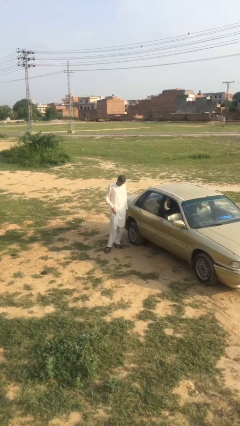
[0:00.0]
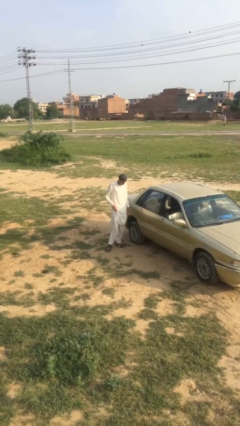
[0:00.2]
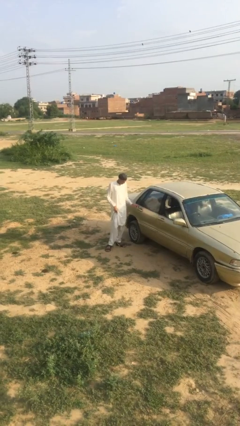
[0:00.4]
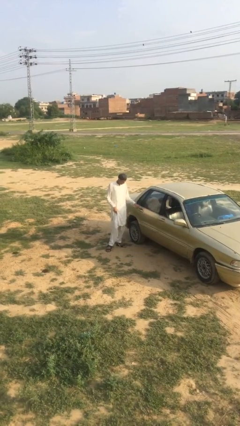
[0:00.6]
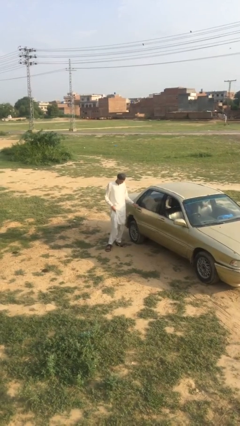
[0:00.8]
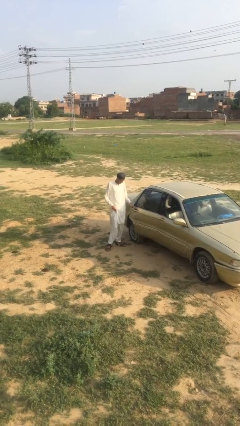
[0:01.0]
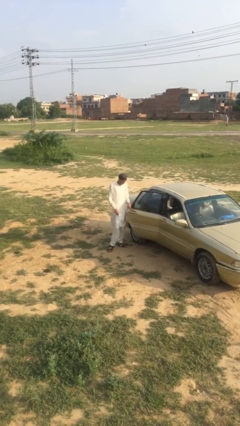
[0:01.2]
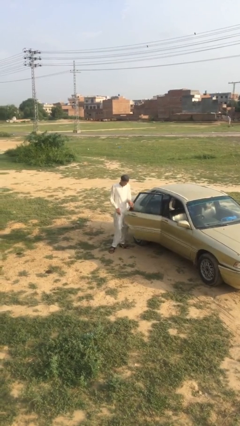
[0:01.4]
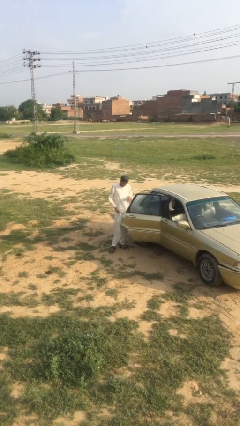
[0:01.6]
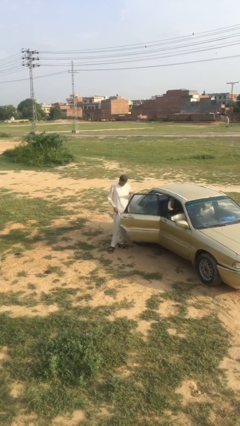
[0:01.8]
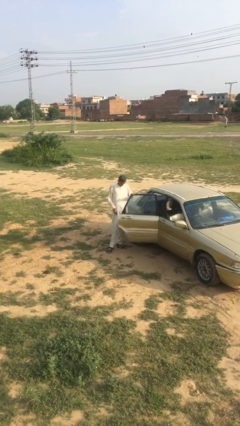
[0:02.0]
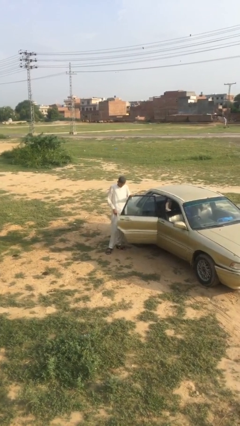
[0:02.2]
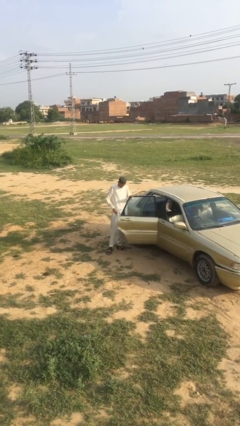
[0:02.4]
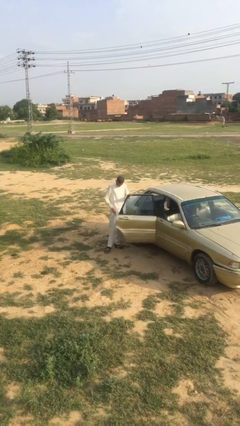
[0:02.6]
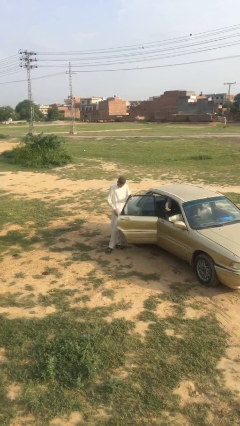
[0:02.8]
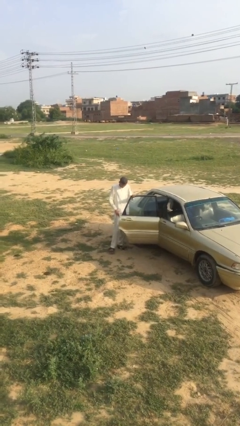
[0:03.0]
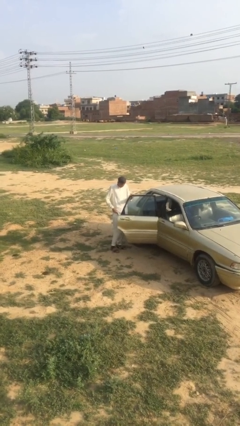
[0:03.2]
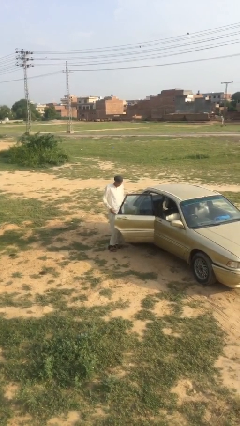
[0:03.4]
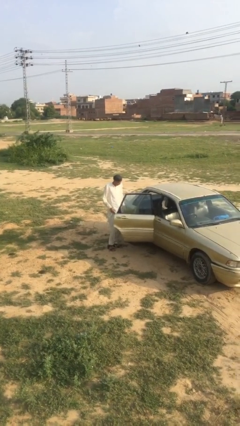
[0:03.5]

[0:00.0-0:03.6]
person opens car door

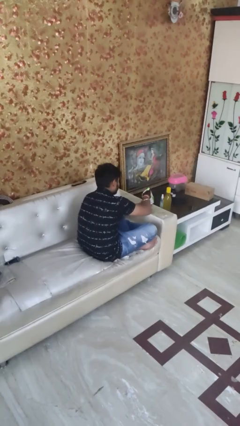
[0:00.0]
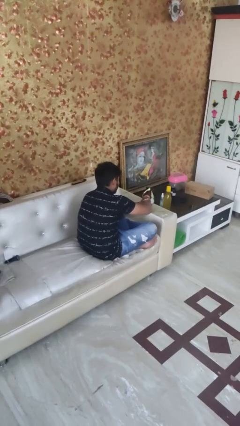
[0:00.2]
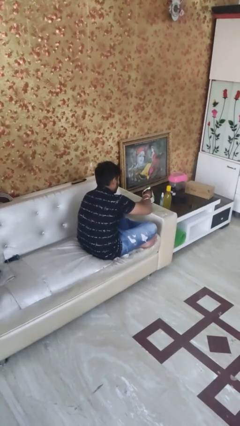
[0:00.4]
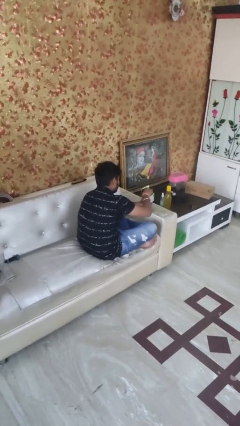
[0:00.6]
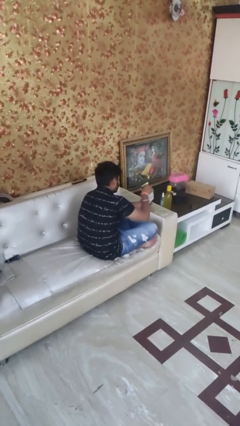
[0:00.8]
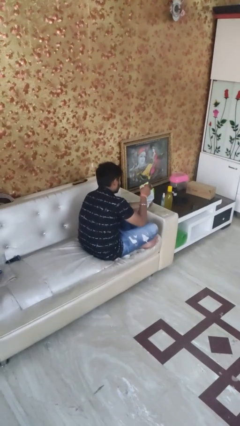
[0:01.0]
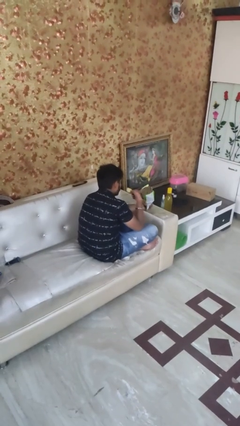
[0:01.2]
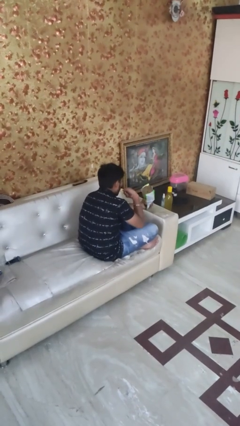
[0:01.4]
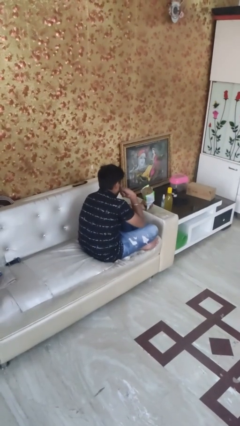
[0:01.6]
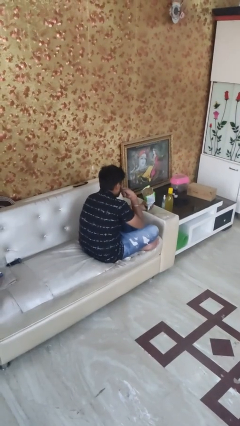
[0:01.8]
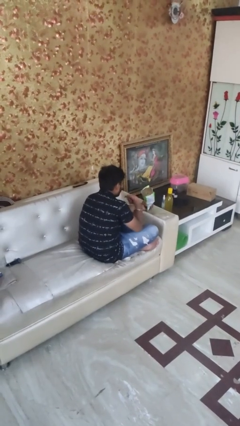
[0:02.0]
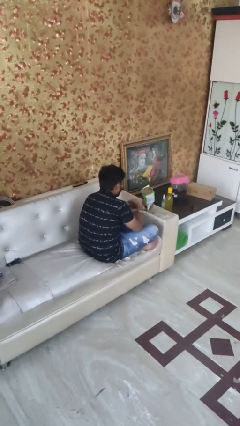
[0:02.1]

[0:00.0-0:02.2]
person eats snack from bag

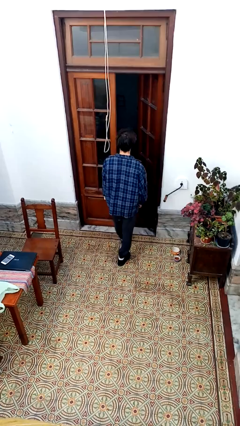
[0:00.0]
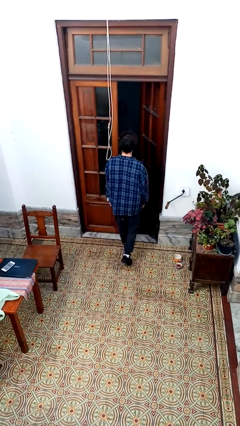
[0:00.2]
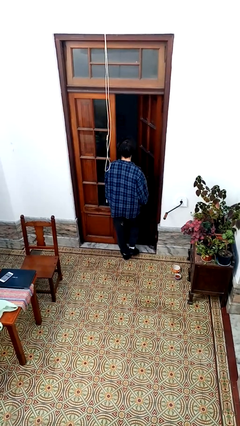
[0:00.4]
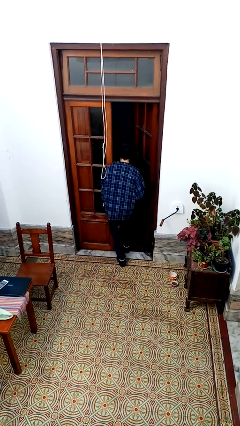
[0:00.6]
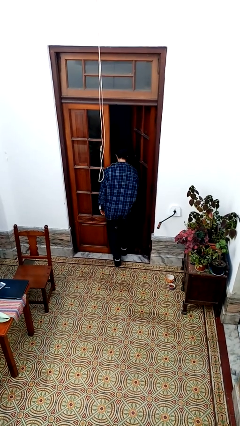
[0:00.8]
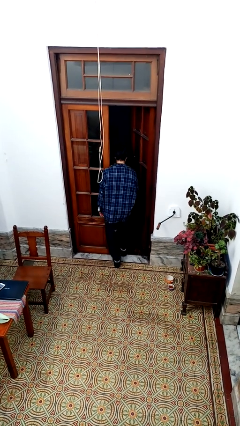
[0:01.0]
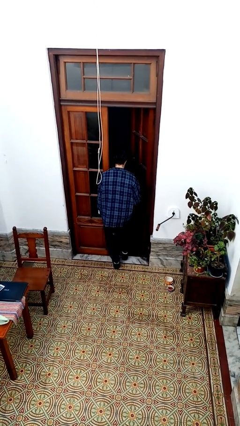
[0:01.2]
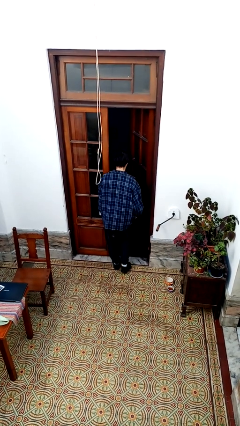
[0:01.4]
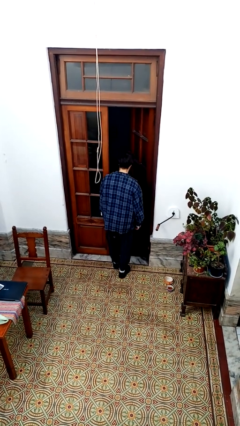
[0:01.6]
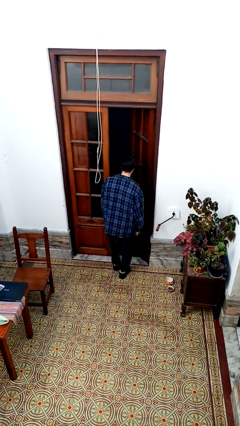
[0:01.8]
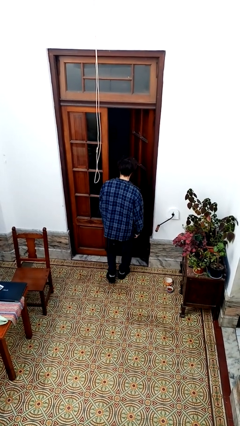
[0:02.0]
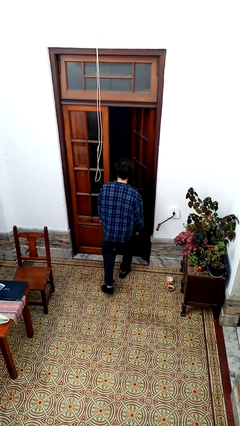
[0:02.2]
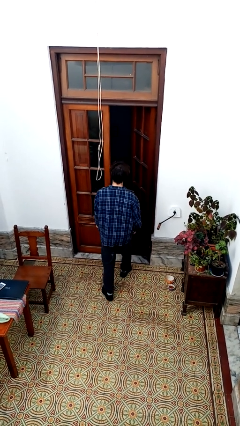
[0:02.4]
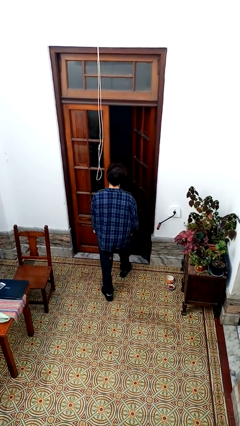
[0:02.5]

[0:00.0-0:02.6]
person bumps into wall

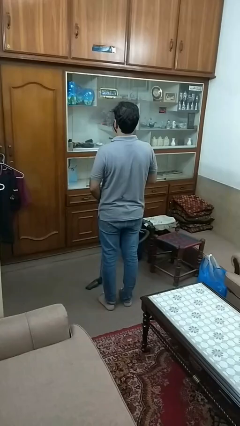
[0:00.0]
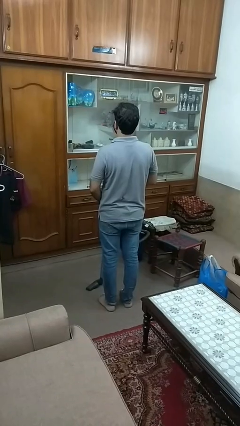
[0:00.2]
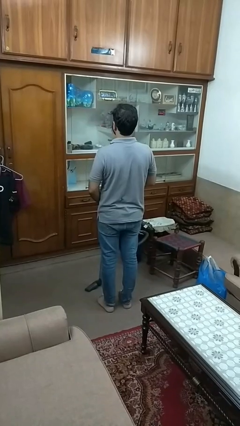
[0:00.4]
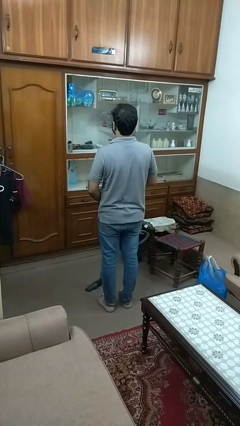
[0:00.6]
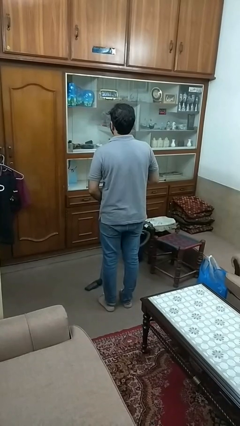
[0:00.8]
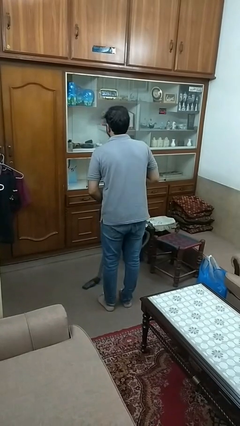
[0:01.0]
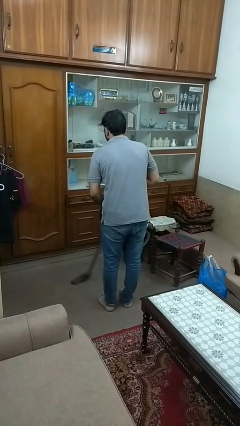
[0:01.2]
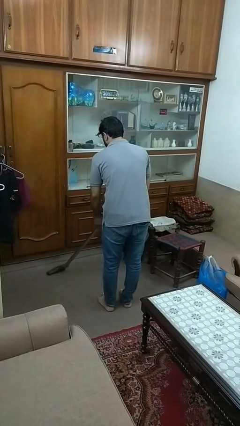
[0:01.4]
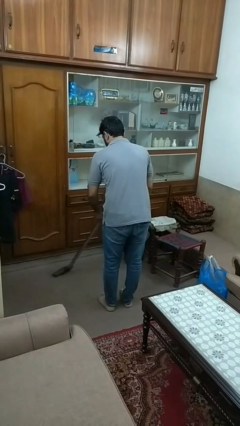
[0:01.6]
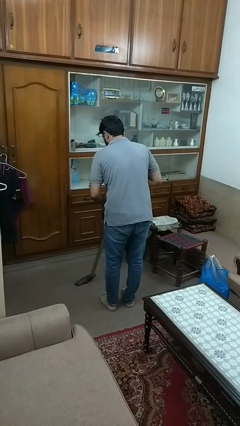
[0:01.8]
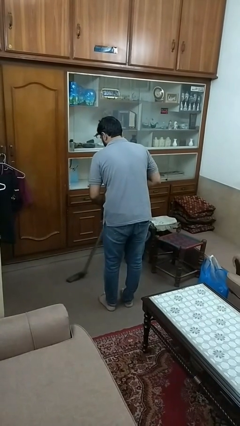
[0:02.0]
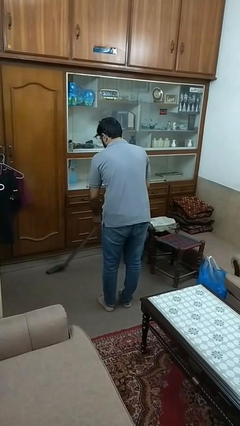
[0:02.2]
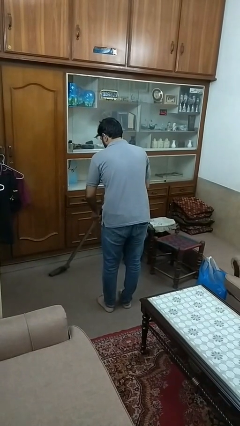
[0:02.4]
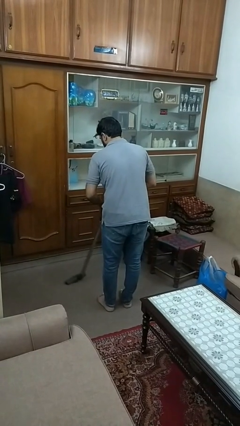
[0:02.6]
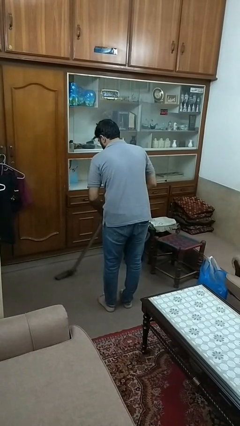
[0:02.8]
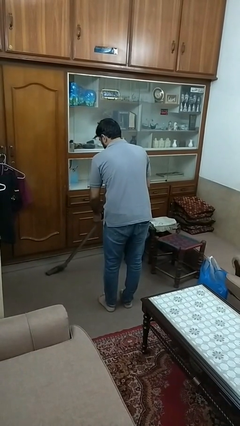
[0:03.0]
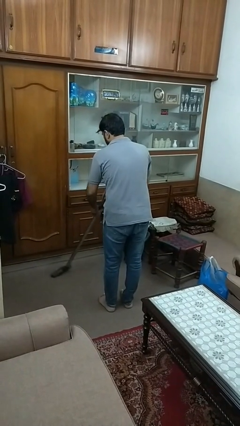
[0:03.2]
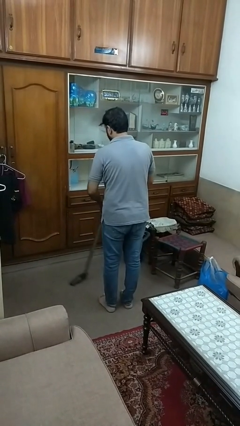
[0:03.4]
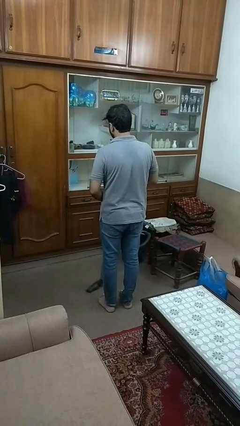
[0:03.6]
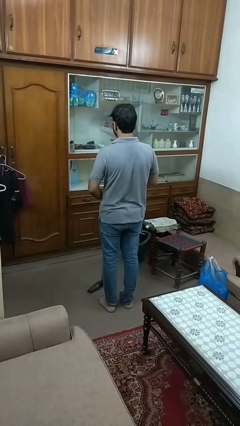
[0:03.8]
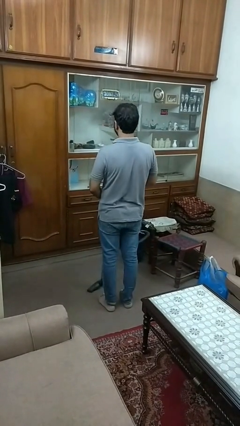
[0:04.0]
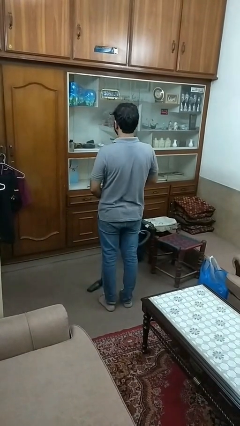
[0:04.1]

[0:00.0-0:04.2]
person vacuums carpet

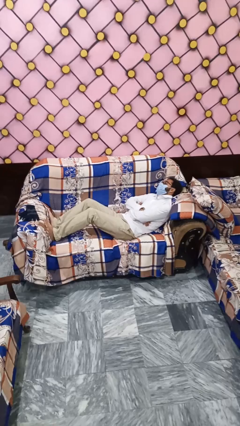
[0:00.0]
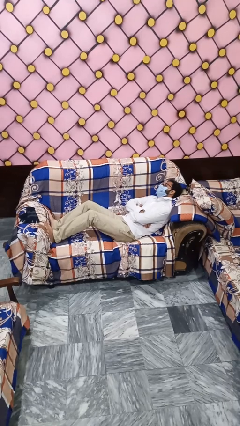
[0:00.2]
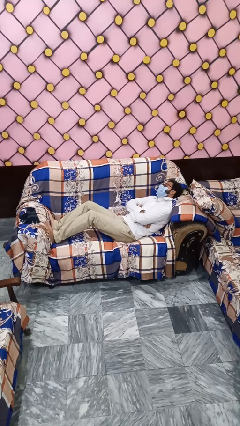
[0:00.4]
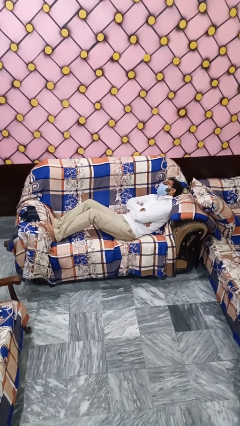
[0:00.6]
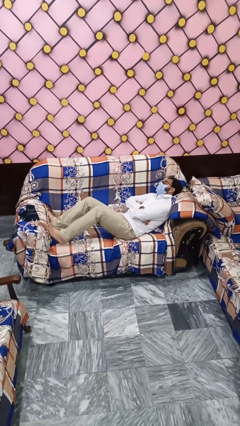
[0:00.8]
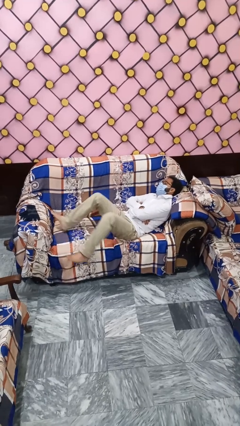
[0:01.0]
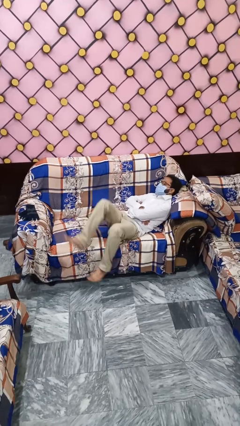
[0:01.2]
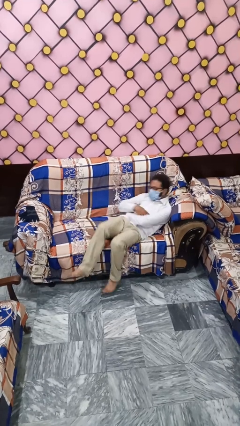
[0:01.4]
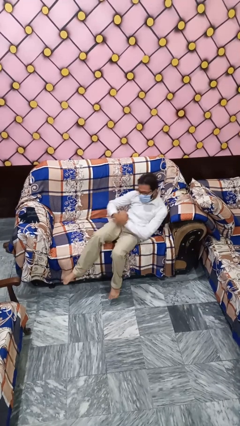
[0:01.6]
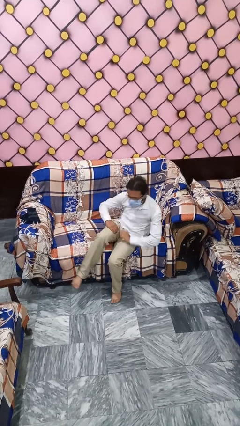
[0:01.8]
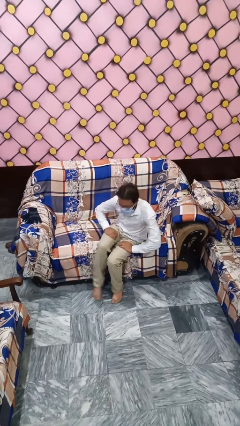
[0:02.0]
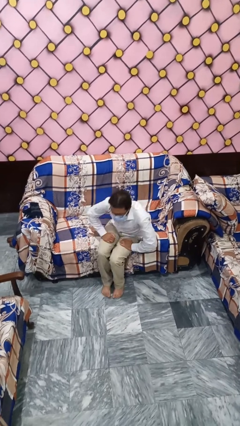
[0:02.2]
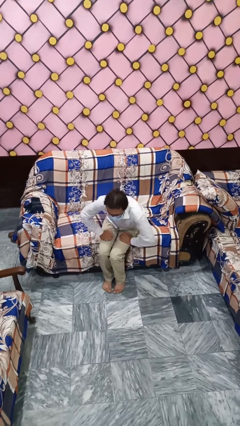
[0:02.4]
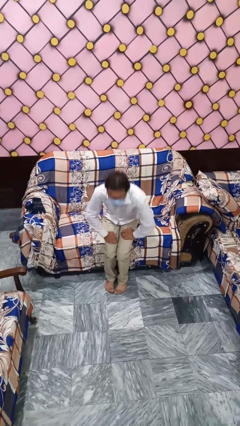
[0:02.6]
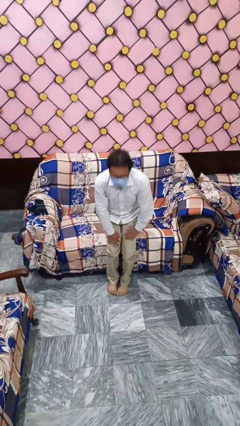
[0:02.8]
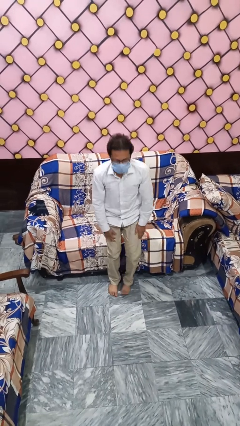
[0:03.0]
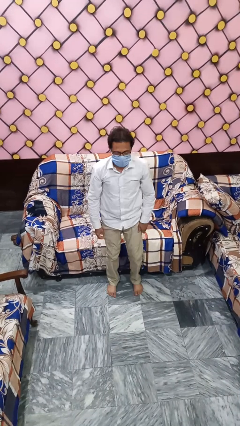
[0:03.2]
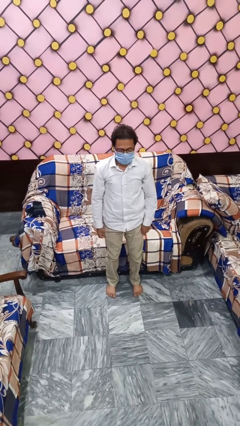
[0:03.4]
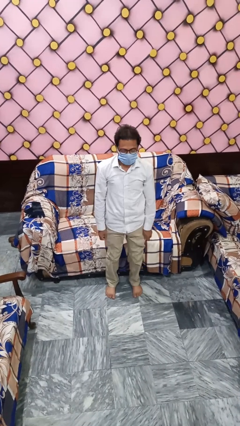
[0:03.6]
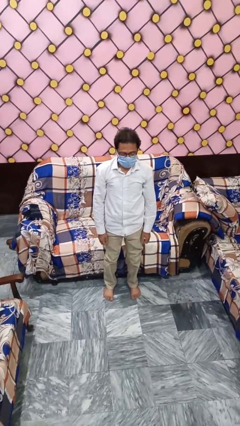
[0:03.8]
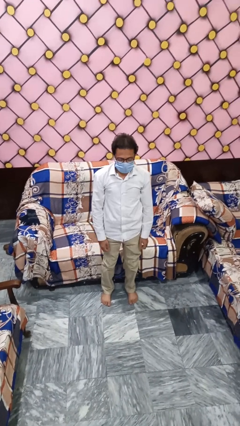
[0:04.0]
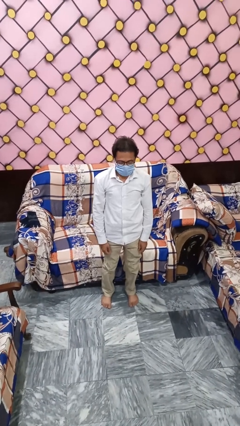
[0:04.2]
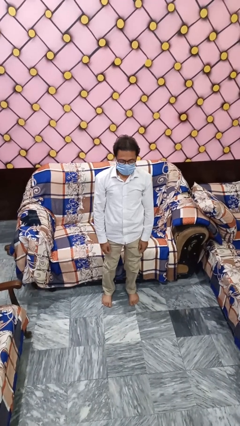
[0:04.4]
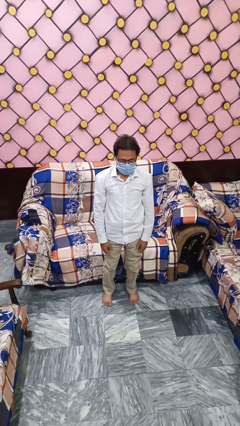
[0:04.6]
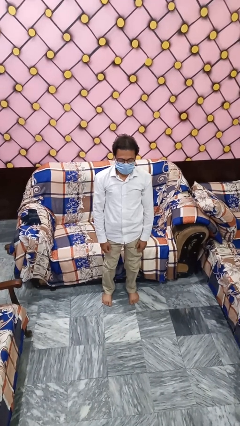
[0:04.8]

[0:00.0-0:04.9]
person stands up

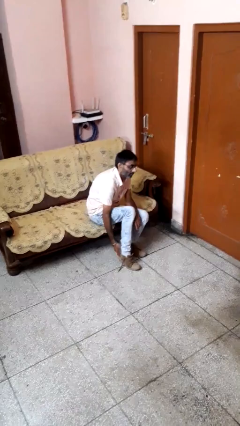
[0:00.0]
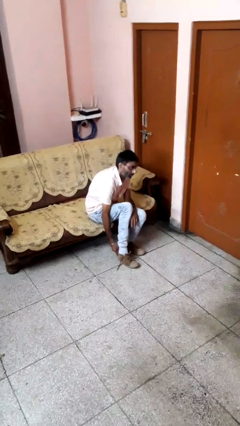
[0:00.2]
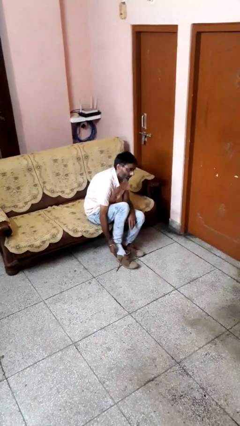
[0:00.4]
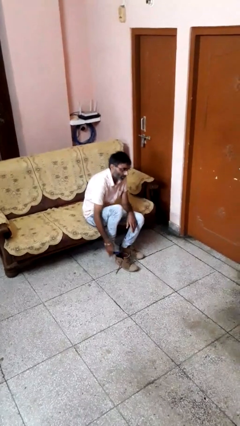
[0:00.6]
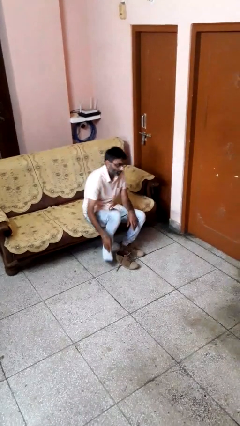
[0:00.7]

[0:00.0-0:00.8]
person takes off shoes
